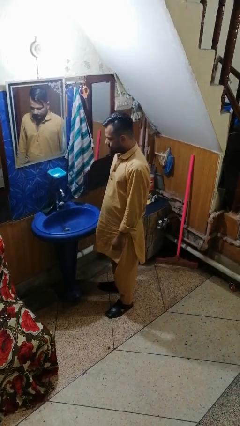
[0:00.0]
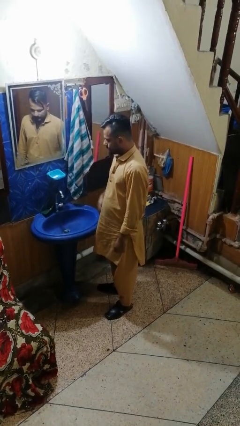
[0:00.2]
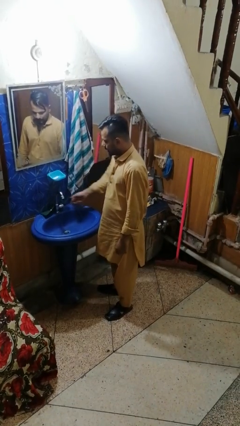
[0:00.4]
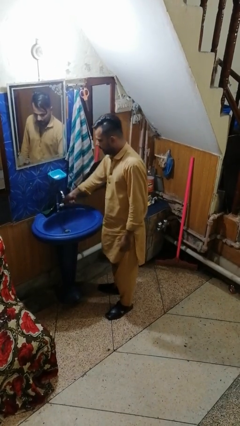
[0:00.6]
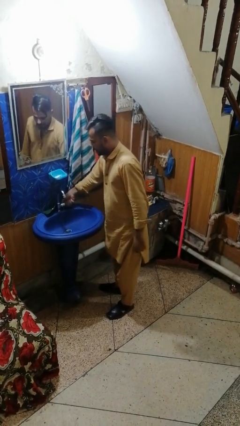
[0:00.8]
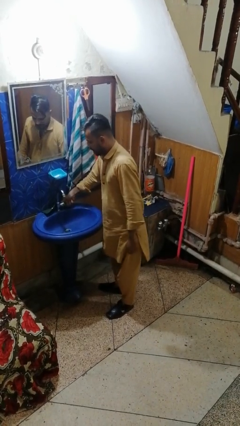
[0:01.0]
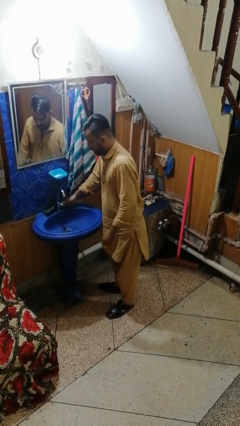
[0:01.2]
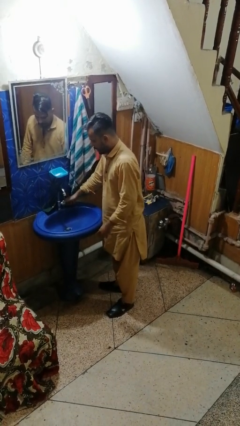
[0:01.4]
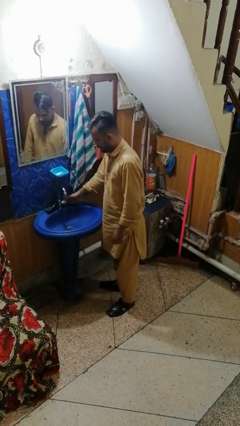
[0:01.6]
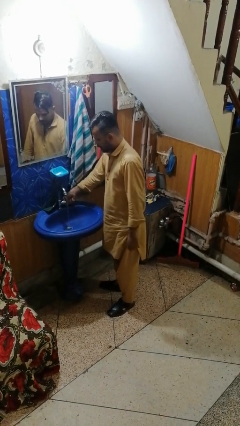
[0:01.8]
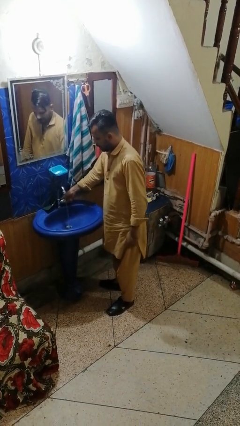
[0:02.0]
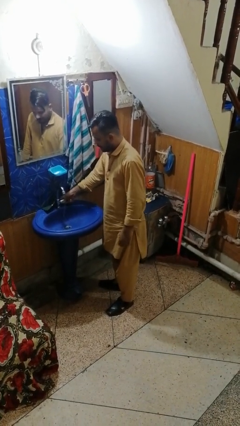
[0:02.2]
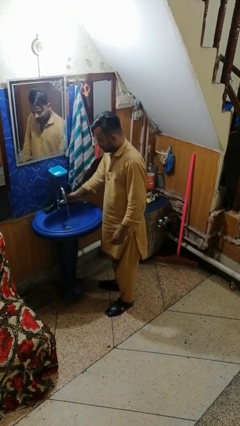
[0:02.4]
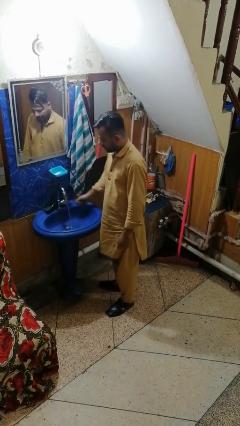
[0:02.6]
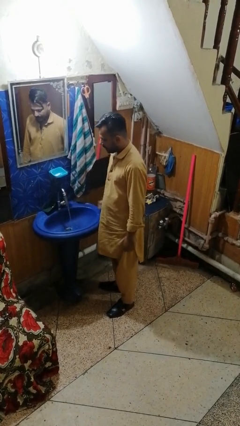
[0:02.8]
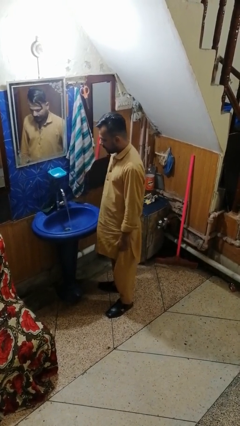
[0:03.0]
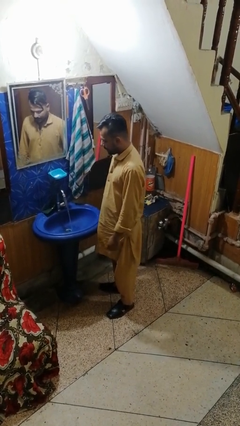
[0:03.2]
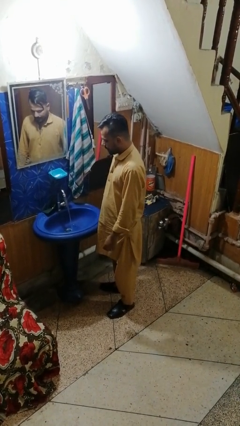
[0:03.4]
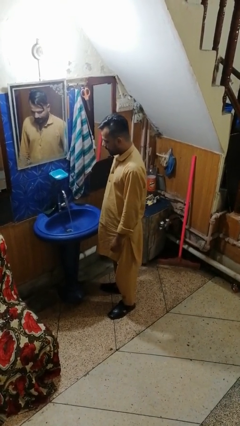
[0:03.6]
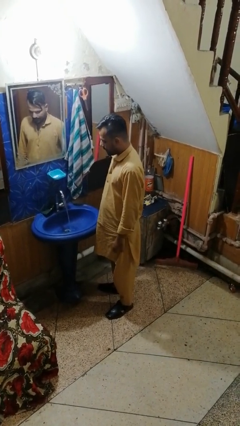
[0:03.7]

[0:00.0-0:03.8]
person turns on faucet

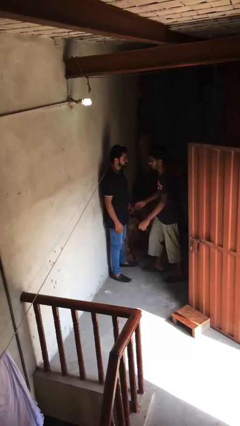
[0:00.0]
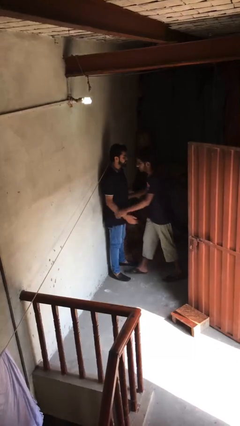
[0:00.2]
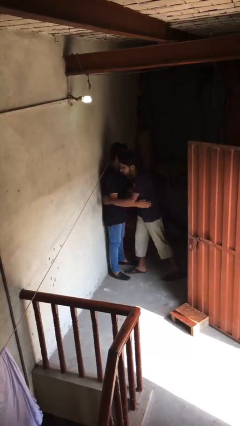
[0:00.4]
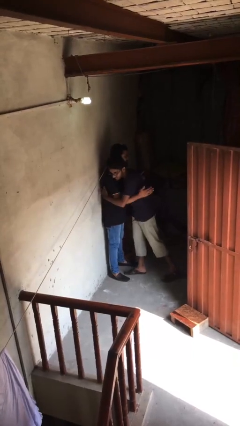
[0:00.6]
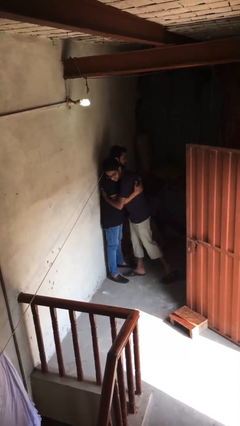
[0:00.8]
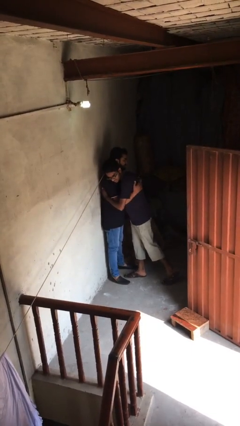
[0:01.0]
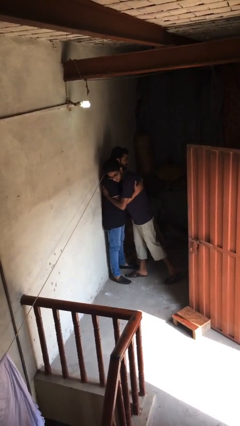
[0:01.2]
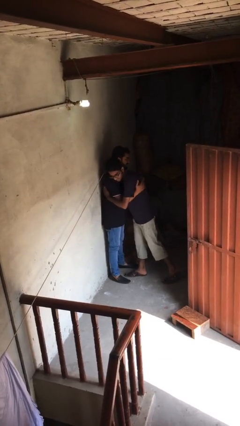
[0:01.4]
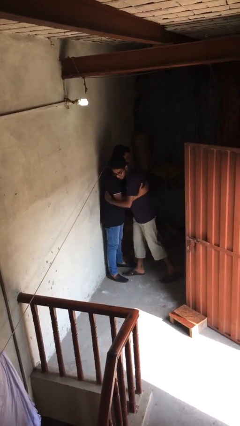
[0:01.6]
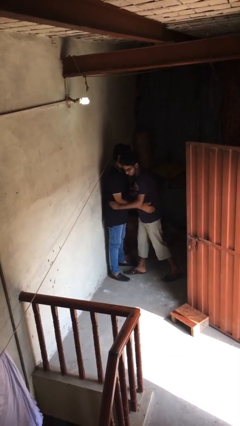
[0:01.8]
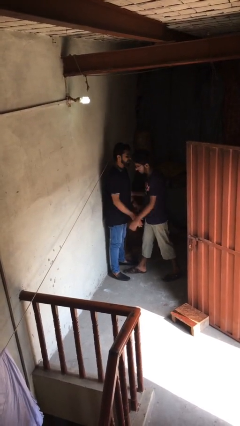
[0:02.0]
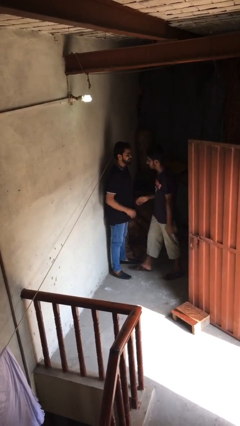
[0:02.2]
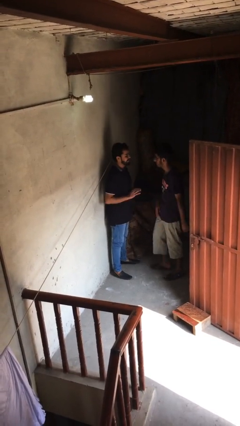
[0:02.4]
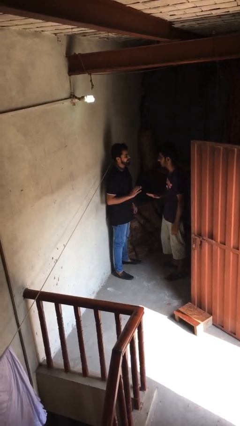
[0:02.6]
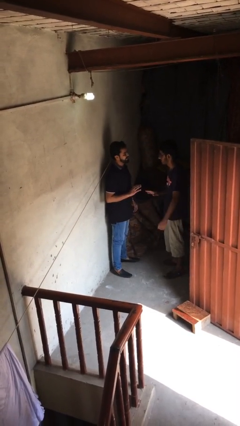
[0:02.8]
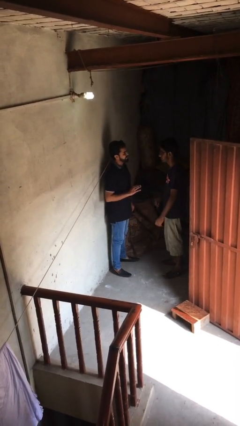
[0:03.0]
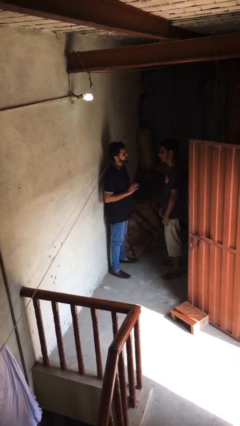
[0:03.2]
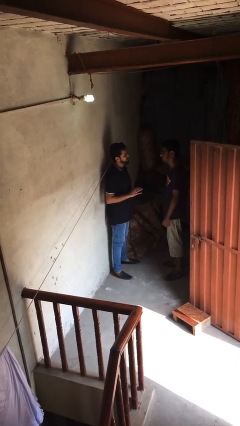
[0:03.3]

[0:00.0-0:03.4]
person embraces person

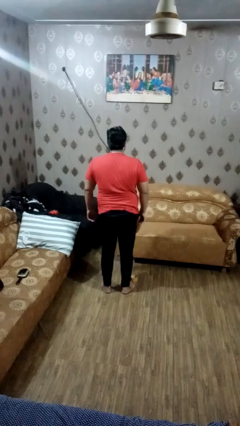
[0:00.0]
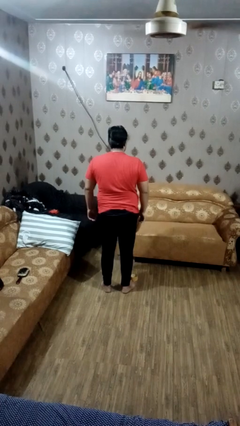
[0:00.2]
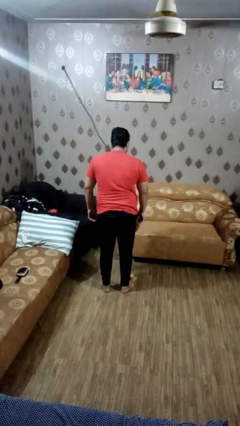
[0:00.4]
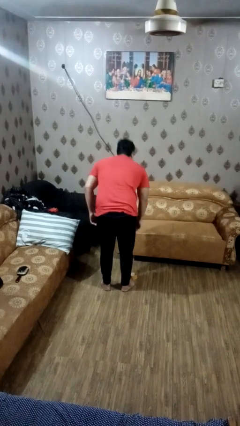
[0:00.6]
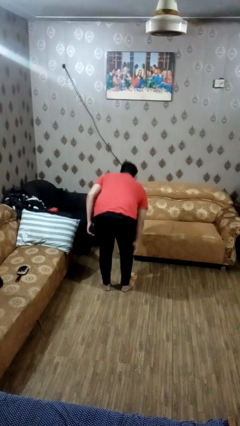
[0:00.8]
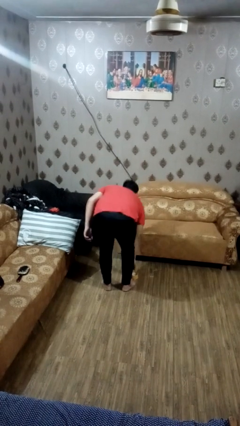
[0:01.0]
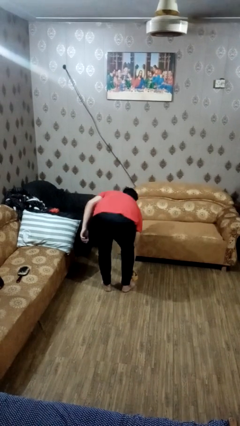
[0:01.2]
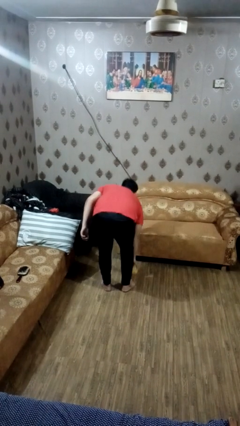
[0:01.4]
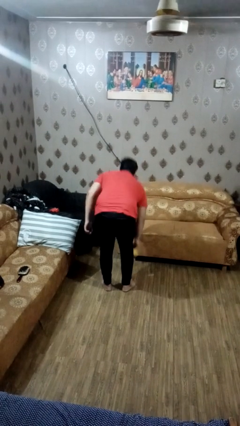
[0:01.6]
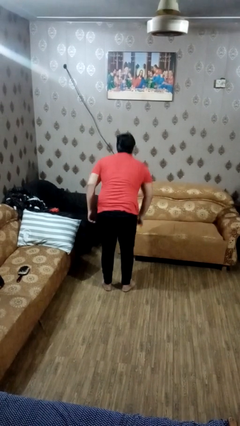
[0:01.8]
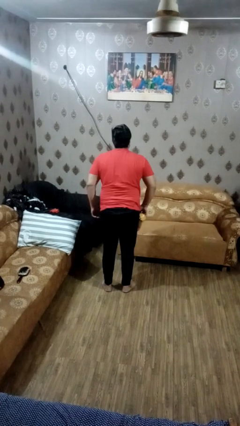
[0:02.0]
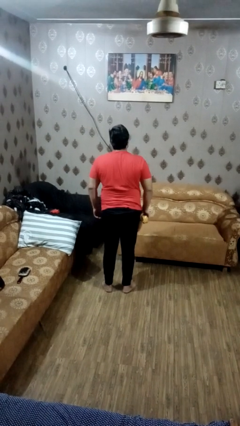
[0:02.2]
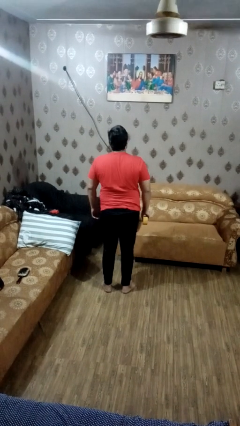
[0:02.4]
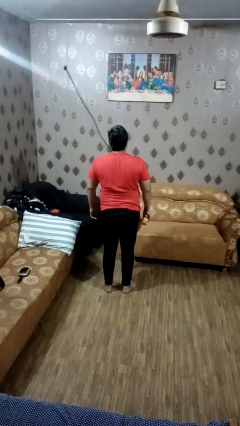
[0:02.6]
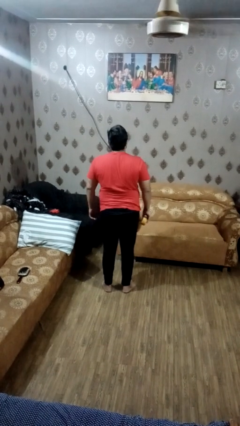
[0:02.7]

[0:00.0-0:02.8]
person picks up object from floor

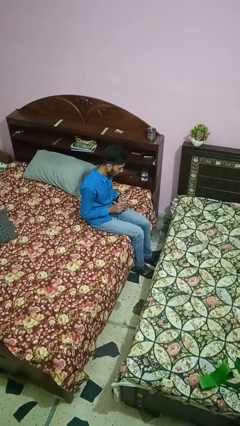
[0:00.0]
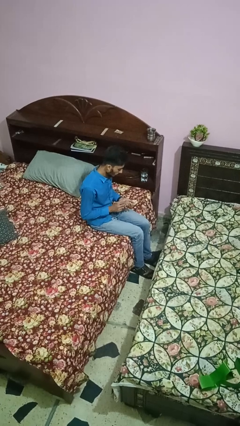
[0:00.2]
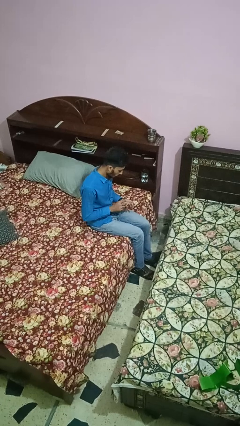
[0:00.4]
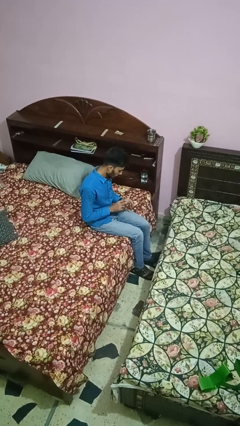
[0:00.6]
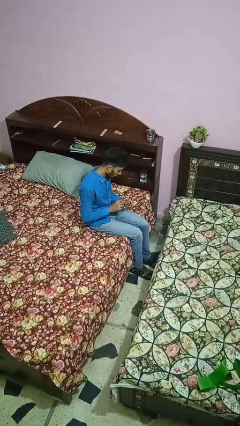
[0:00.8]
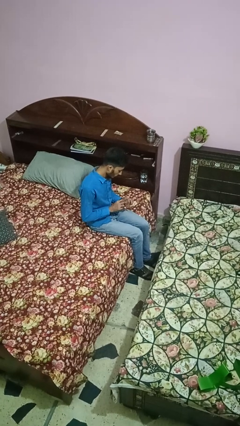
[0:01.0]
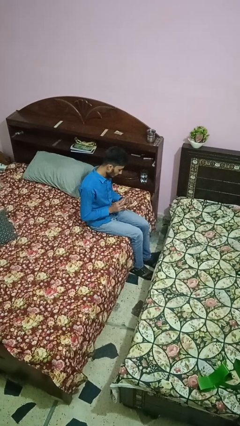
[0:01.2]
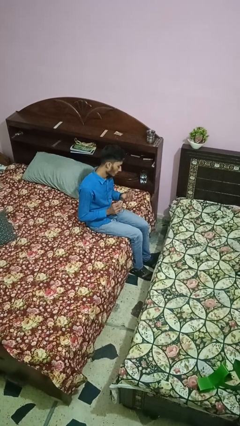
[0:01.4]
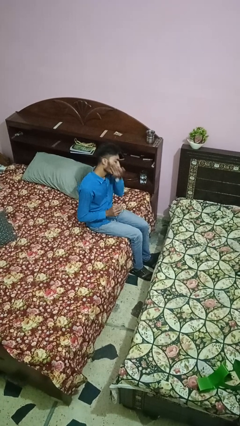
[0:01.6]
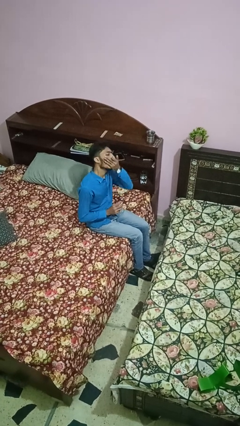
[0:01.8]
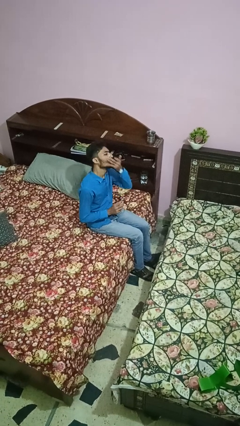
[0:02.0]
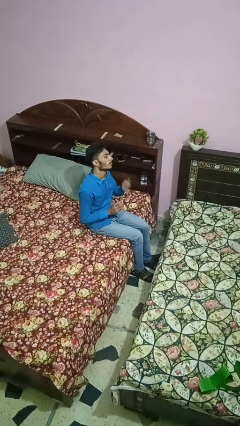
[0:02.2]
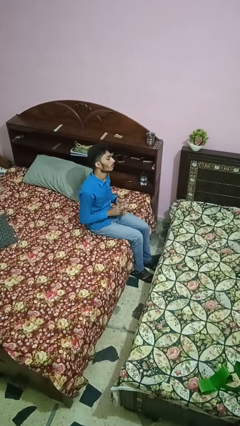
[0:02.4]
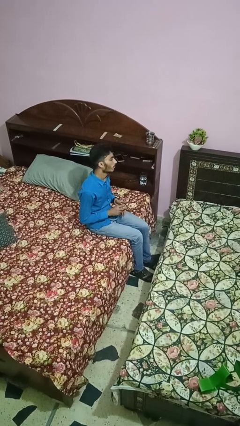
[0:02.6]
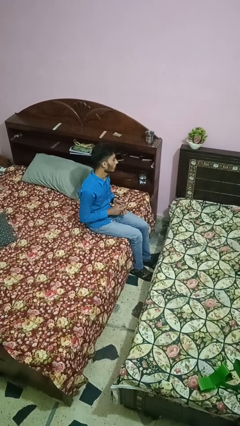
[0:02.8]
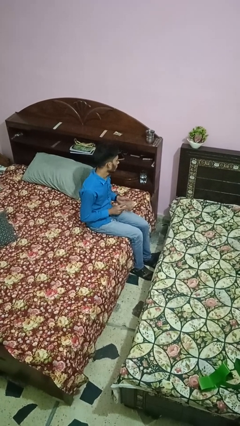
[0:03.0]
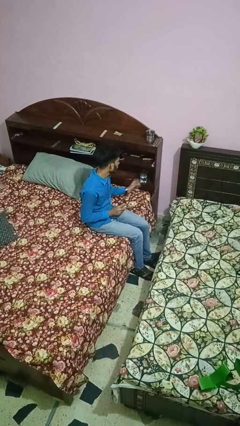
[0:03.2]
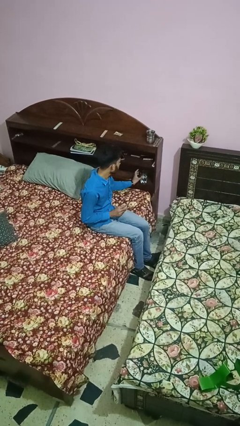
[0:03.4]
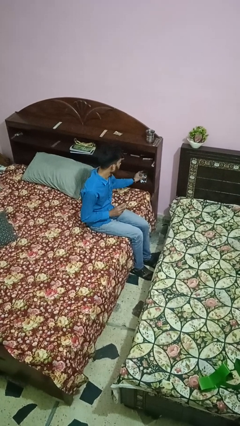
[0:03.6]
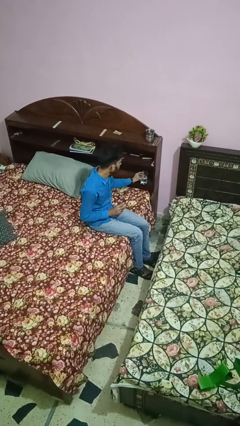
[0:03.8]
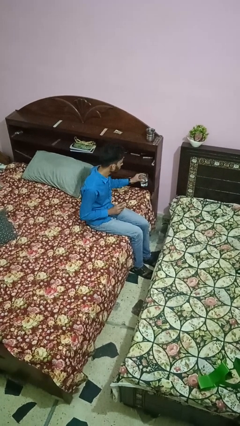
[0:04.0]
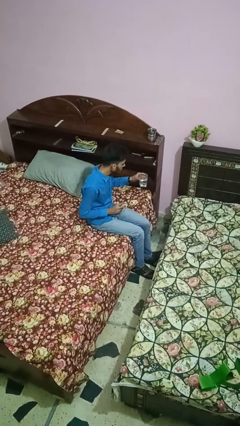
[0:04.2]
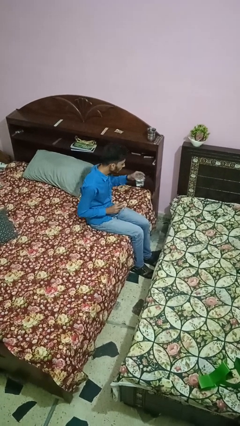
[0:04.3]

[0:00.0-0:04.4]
person takes medicine pills

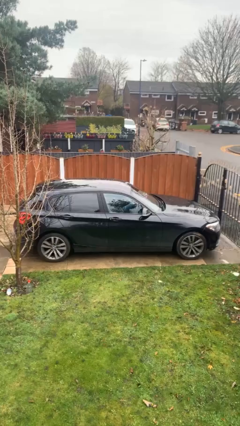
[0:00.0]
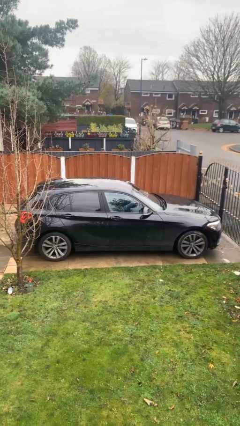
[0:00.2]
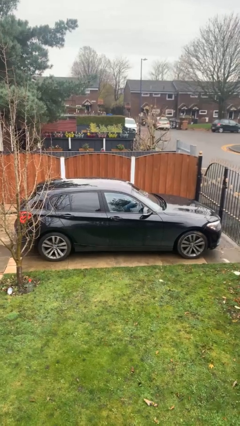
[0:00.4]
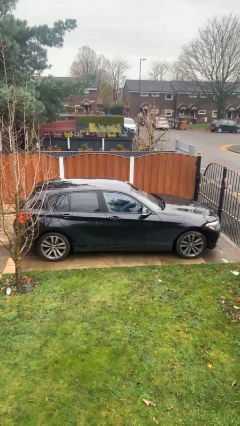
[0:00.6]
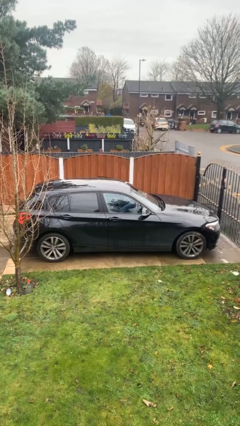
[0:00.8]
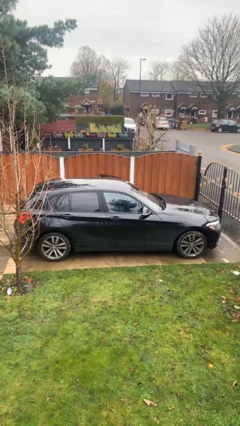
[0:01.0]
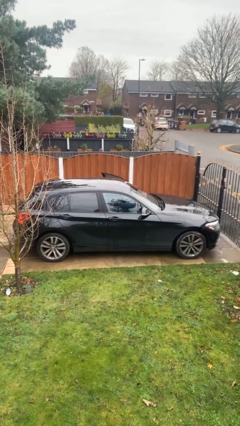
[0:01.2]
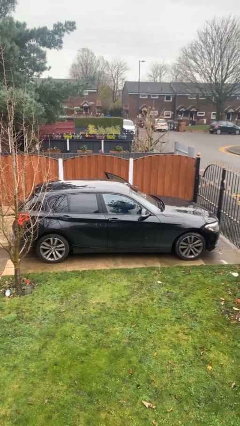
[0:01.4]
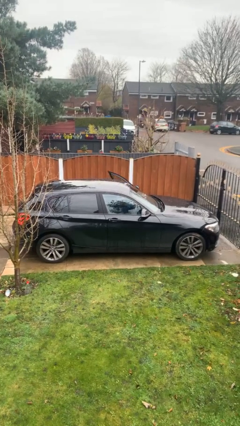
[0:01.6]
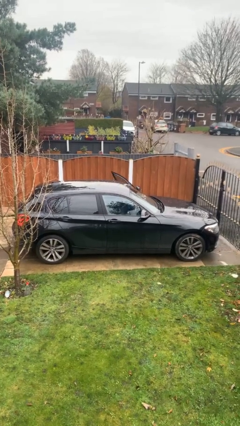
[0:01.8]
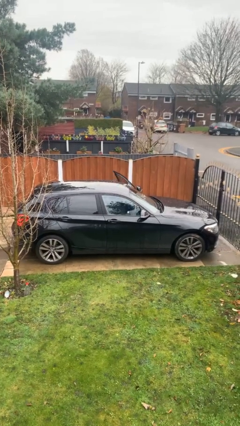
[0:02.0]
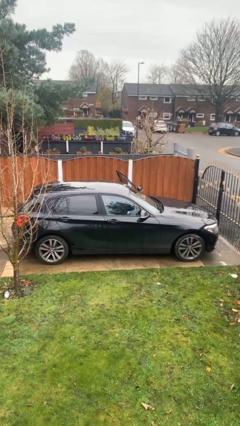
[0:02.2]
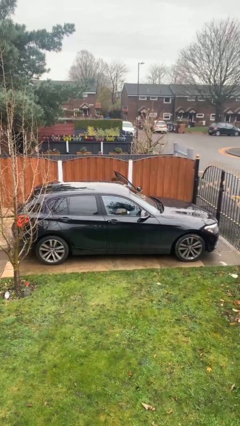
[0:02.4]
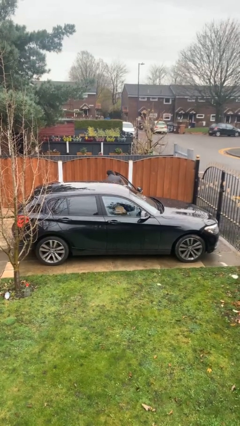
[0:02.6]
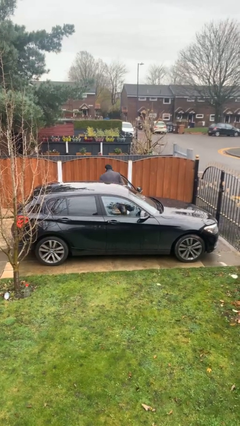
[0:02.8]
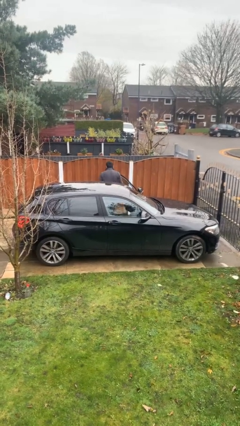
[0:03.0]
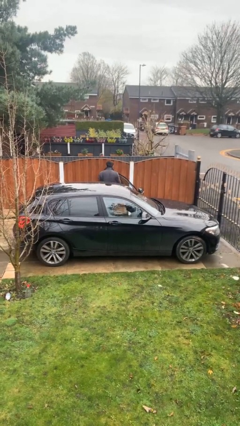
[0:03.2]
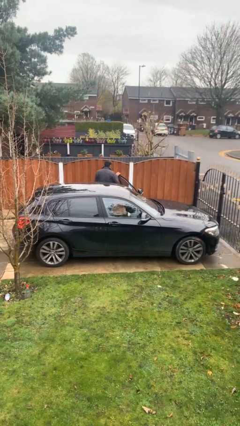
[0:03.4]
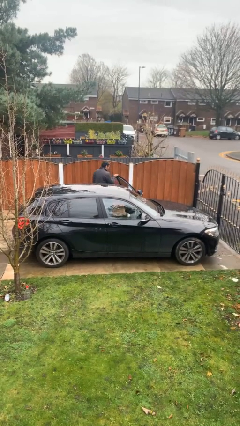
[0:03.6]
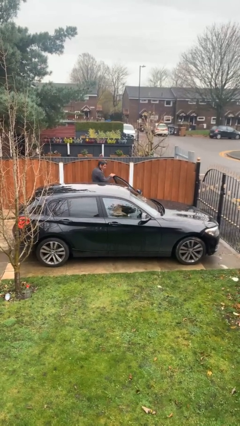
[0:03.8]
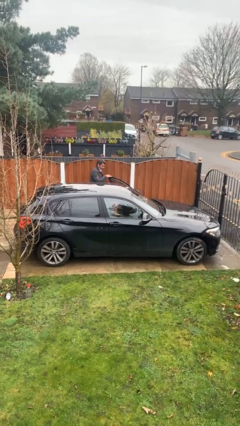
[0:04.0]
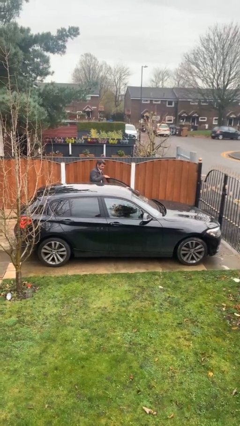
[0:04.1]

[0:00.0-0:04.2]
car drops off person
